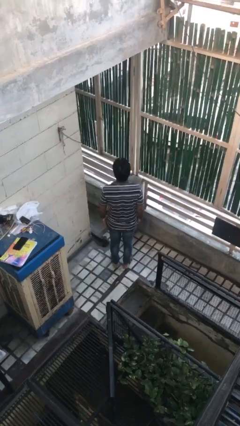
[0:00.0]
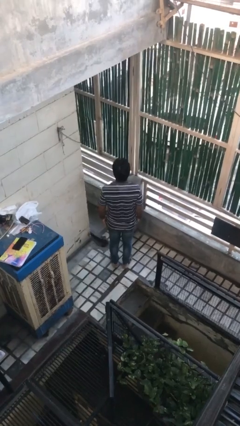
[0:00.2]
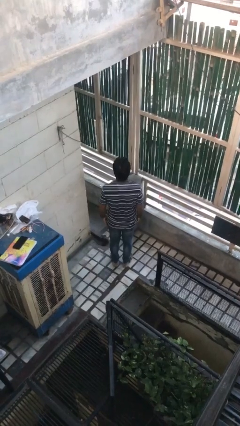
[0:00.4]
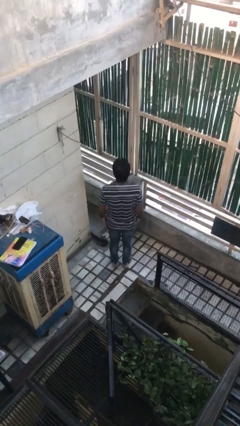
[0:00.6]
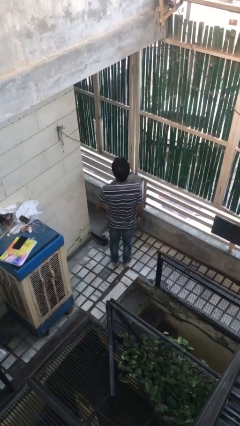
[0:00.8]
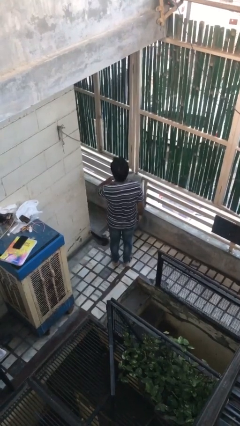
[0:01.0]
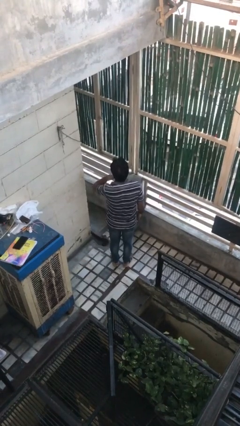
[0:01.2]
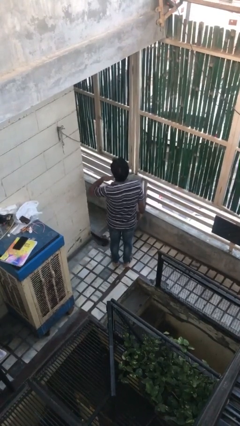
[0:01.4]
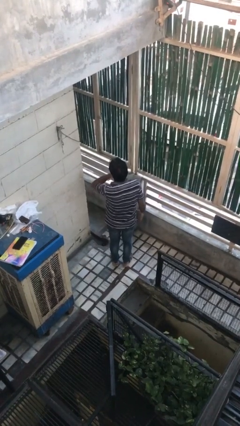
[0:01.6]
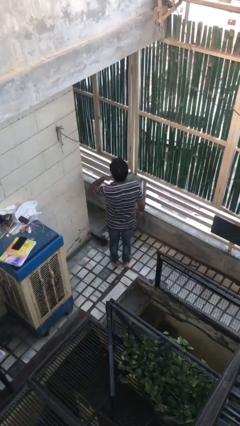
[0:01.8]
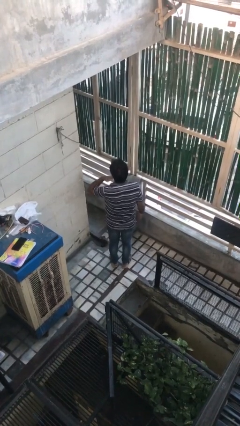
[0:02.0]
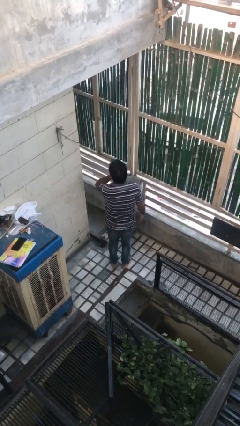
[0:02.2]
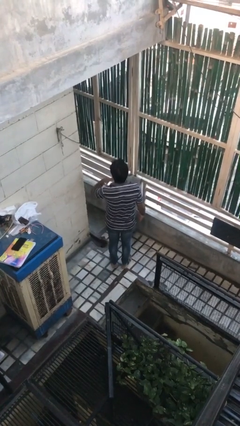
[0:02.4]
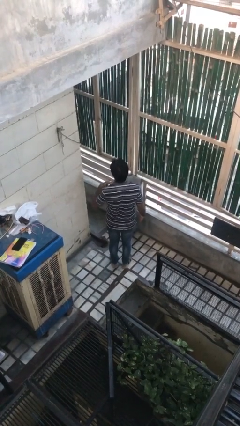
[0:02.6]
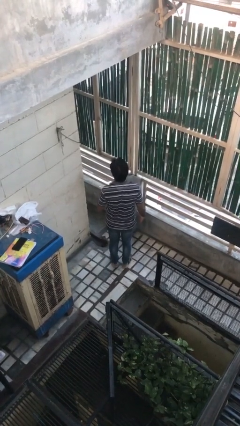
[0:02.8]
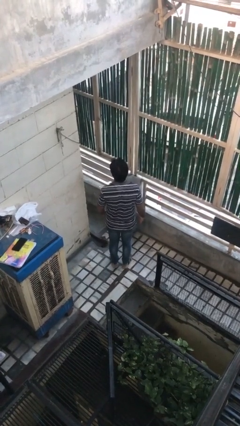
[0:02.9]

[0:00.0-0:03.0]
person gestures cut

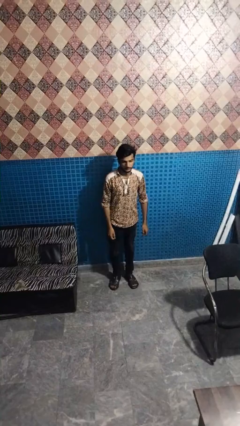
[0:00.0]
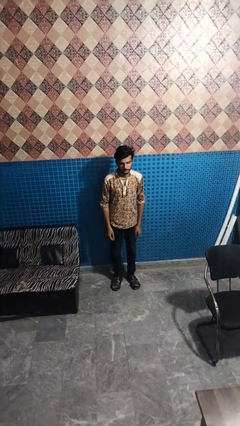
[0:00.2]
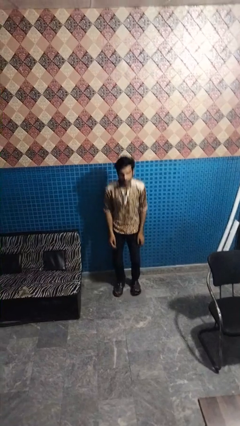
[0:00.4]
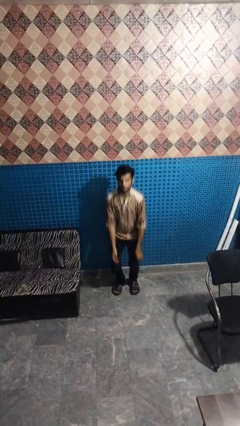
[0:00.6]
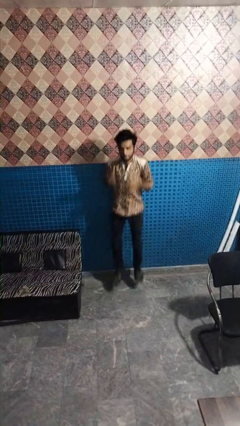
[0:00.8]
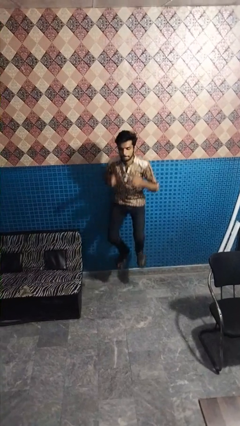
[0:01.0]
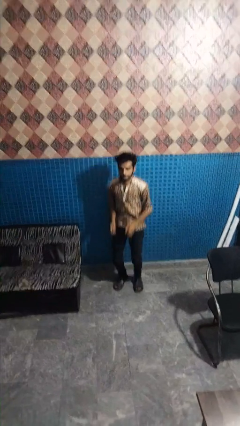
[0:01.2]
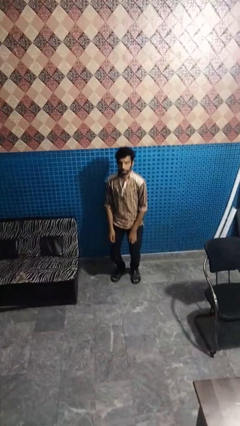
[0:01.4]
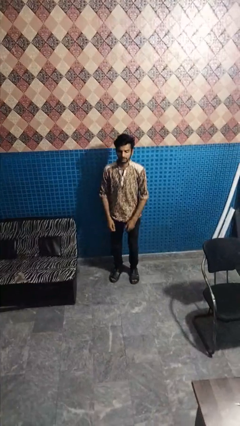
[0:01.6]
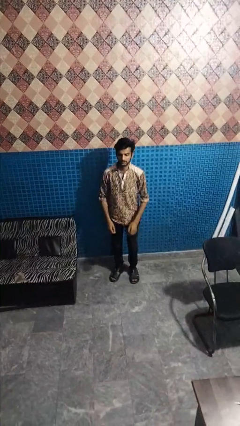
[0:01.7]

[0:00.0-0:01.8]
person jumps

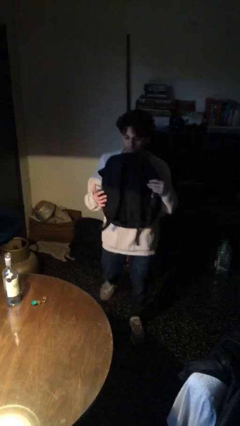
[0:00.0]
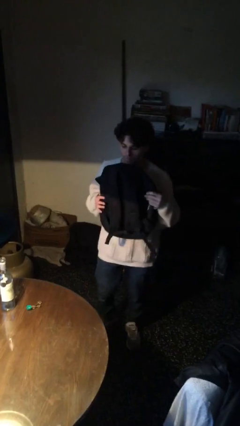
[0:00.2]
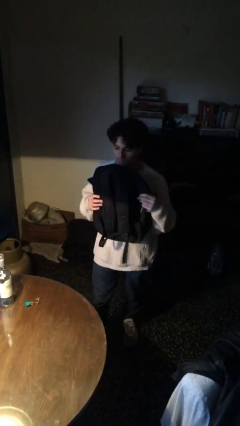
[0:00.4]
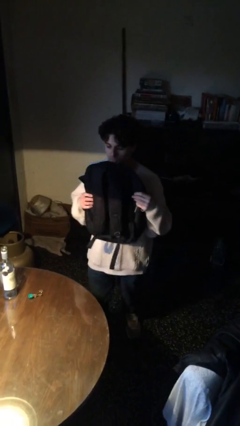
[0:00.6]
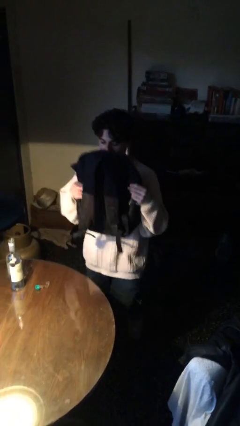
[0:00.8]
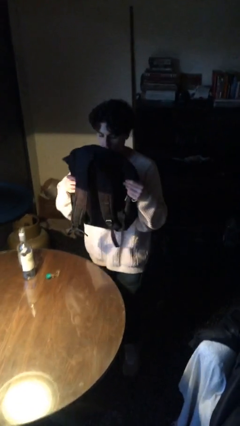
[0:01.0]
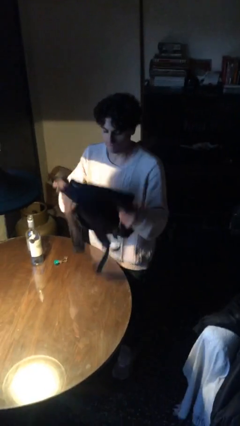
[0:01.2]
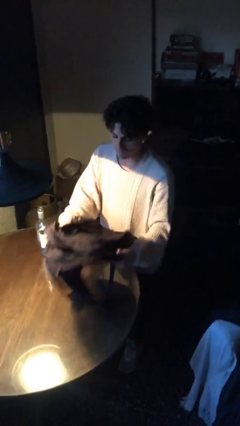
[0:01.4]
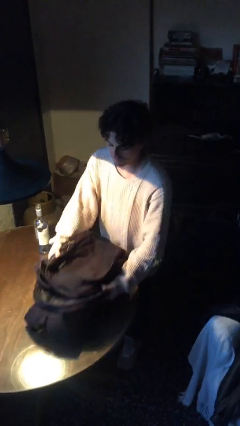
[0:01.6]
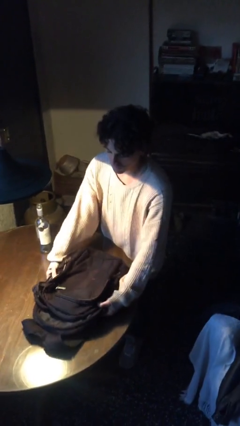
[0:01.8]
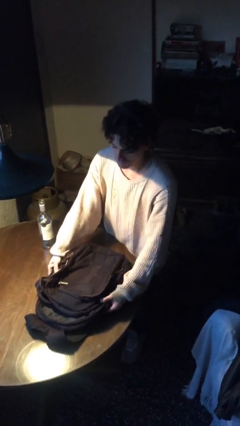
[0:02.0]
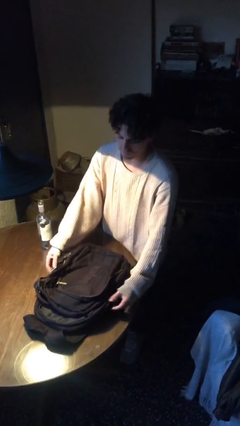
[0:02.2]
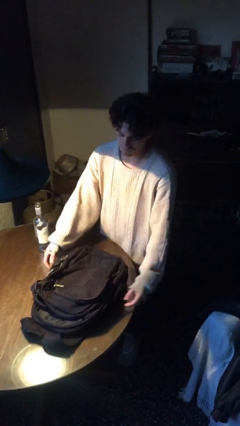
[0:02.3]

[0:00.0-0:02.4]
person puts down object on table

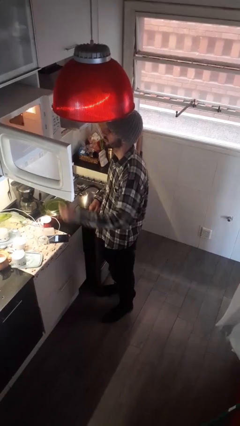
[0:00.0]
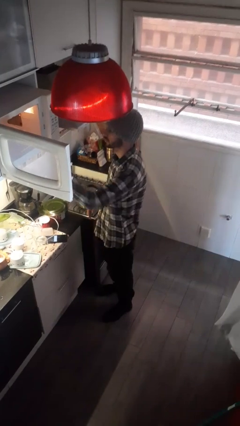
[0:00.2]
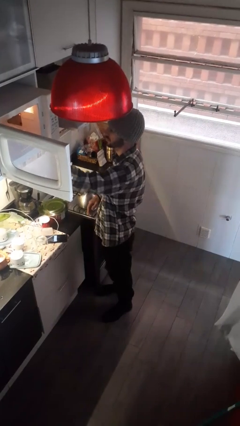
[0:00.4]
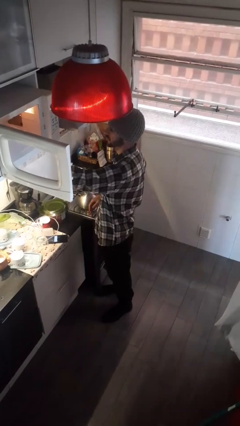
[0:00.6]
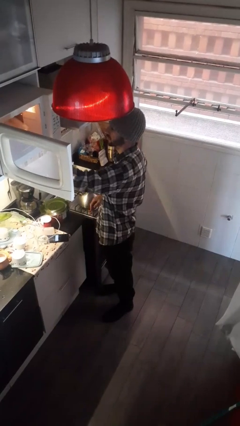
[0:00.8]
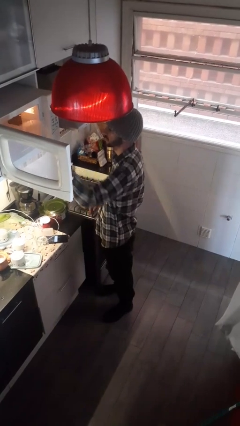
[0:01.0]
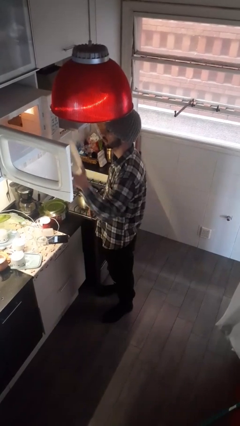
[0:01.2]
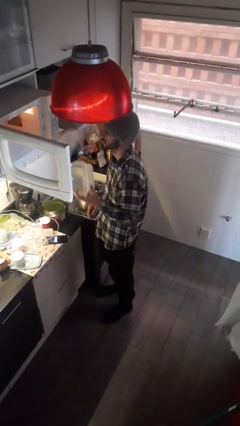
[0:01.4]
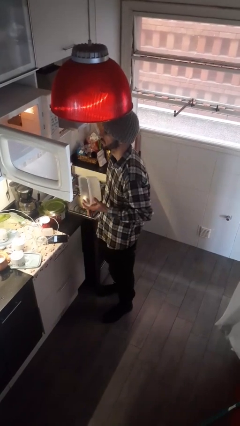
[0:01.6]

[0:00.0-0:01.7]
person takes object from microwave

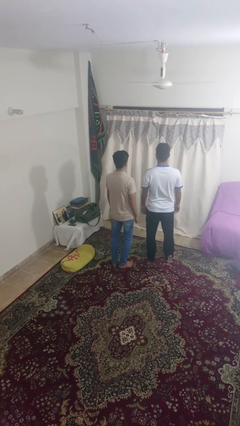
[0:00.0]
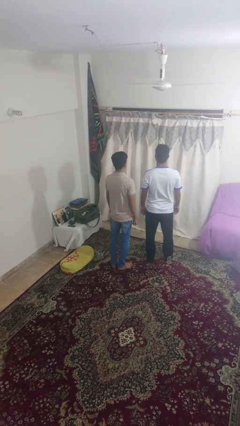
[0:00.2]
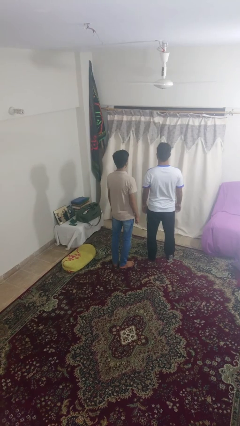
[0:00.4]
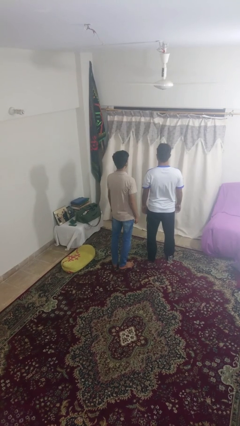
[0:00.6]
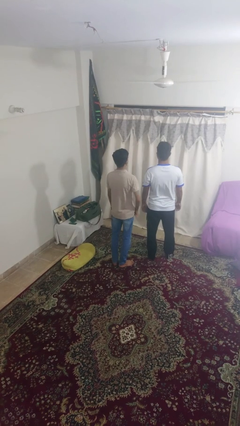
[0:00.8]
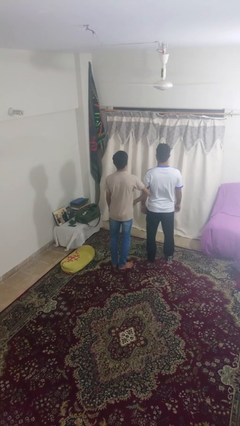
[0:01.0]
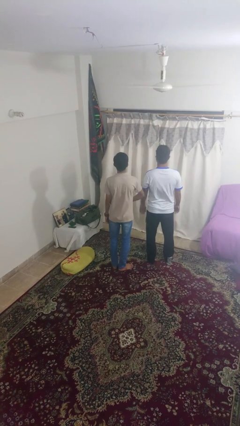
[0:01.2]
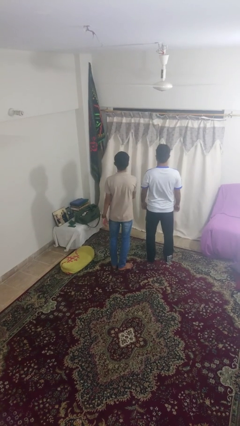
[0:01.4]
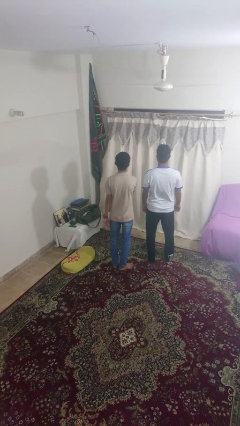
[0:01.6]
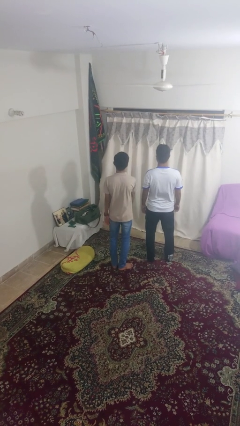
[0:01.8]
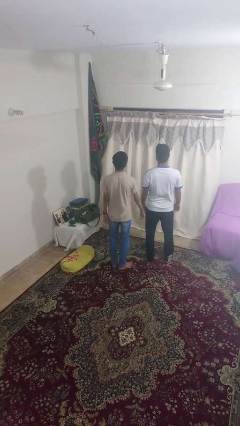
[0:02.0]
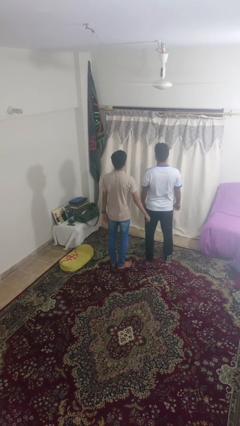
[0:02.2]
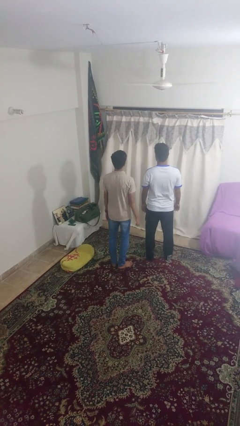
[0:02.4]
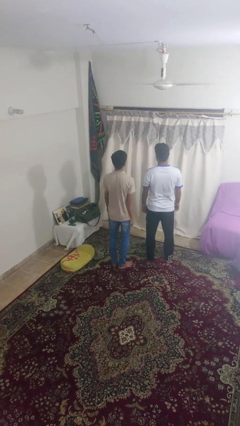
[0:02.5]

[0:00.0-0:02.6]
person nudges person with elbow

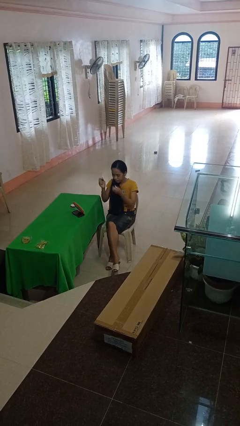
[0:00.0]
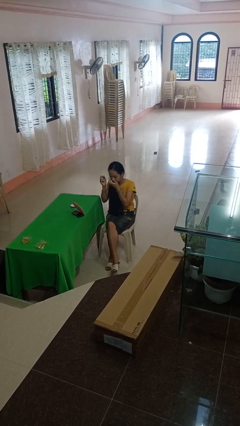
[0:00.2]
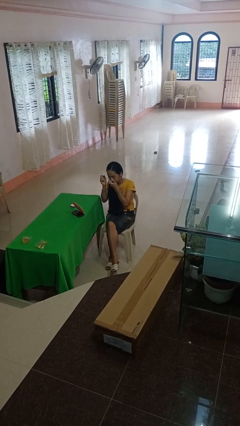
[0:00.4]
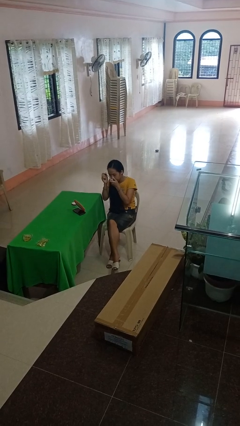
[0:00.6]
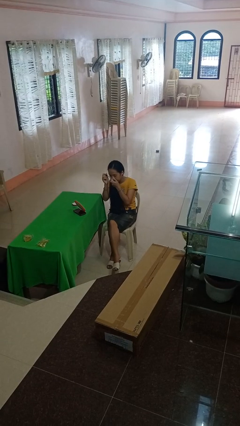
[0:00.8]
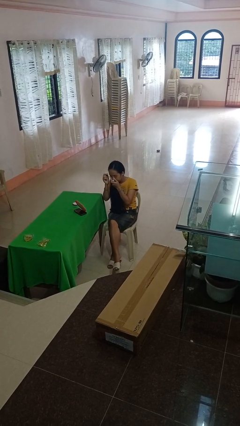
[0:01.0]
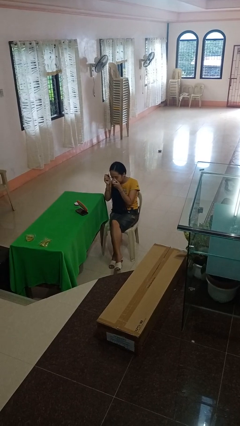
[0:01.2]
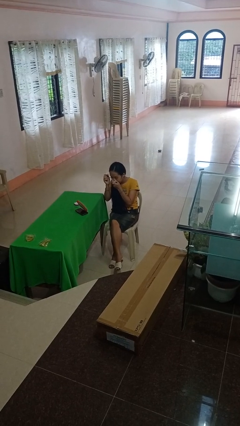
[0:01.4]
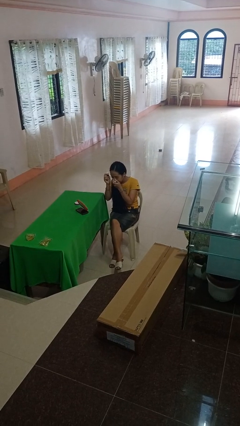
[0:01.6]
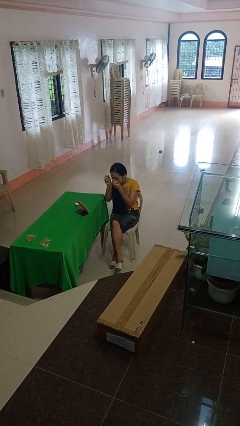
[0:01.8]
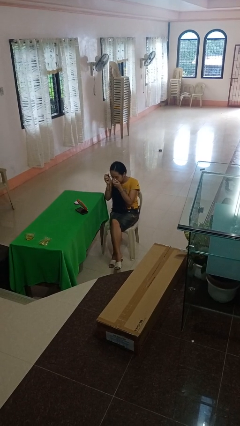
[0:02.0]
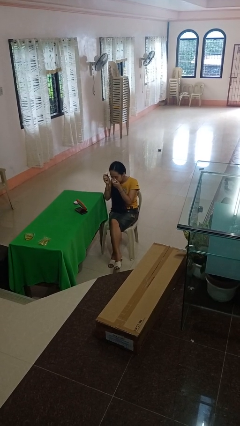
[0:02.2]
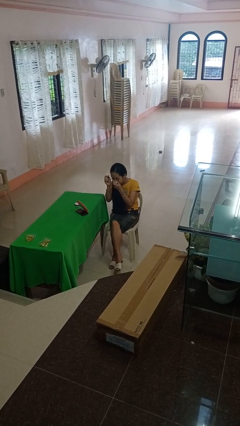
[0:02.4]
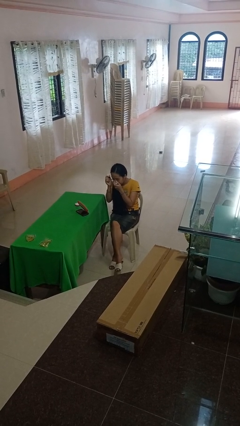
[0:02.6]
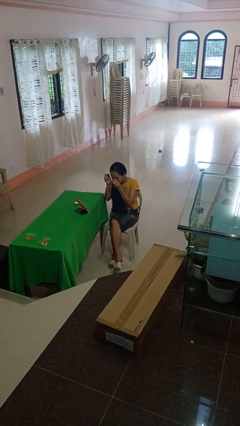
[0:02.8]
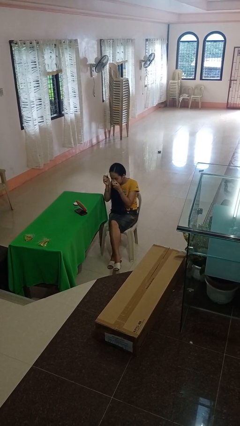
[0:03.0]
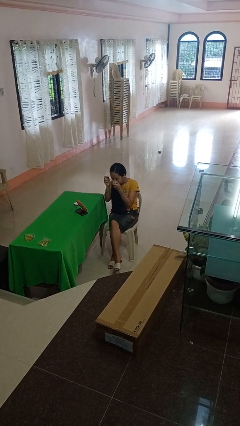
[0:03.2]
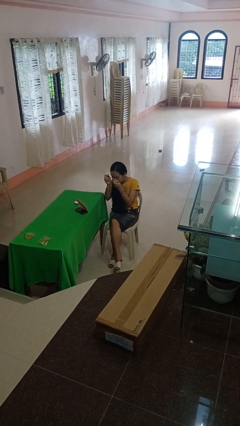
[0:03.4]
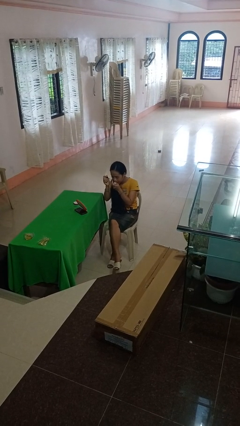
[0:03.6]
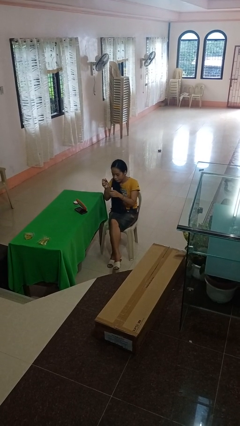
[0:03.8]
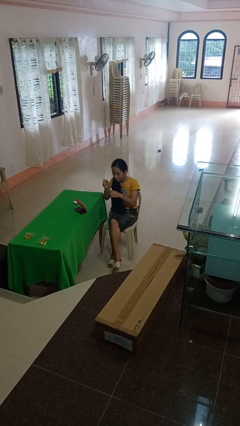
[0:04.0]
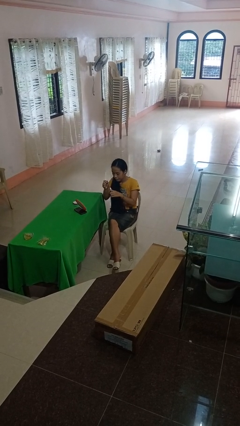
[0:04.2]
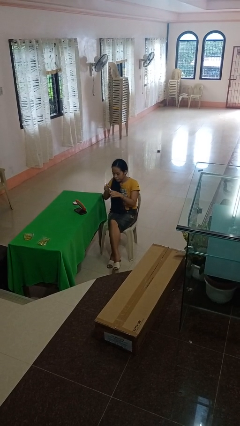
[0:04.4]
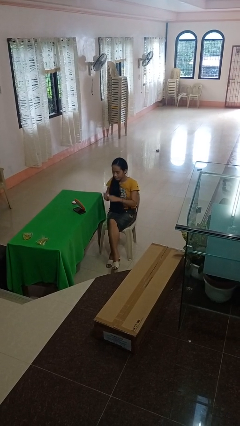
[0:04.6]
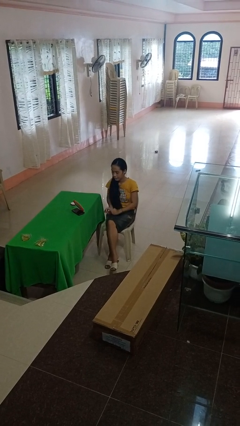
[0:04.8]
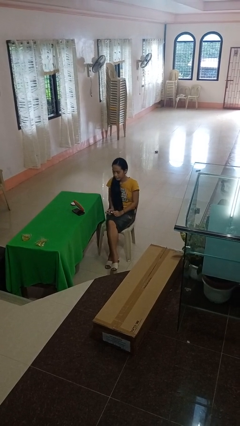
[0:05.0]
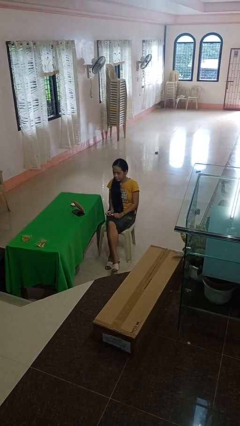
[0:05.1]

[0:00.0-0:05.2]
person applies eye makeup

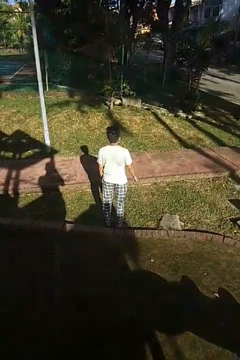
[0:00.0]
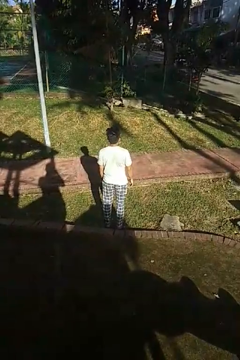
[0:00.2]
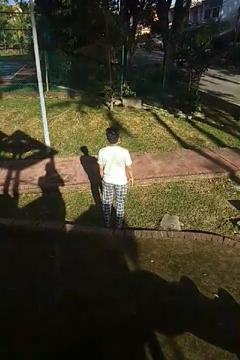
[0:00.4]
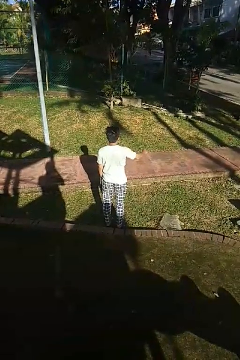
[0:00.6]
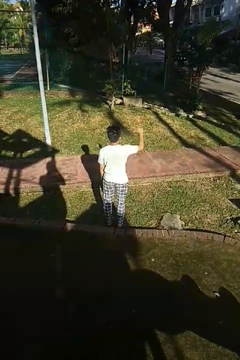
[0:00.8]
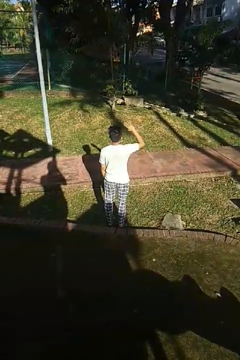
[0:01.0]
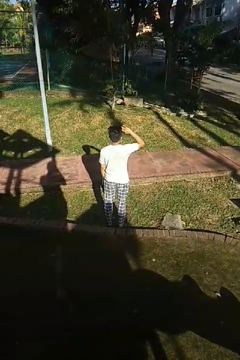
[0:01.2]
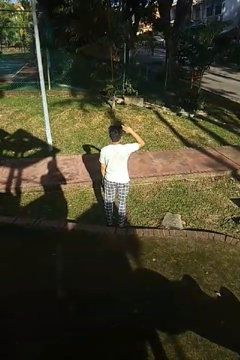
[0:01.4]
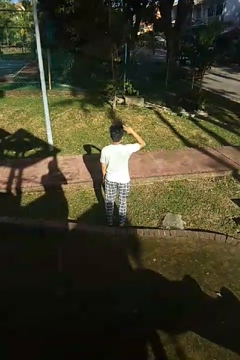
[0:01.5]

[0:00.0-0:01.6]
person salutes
